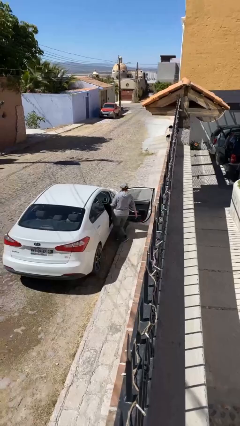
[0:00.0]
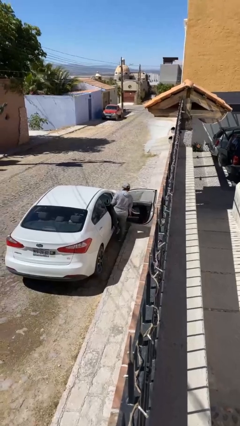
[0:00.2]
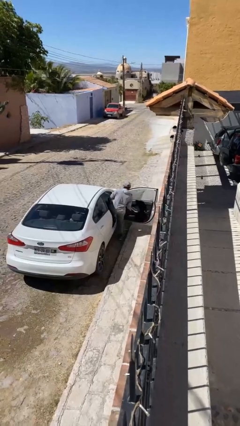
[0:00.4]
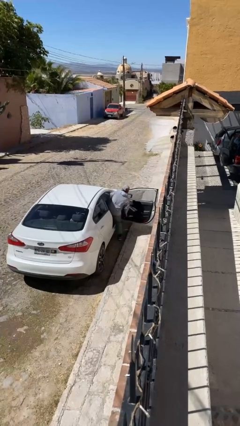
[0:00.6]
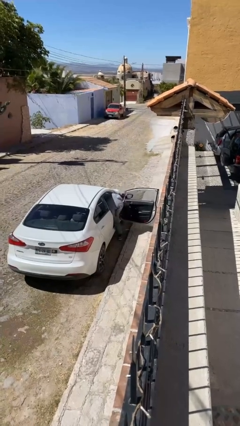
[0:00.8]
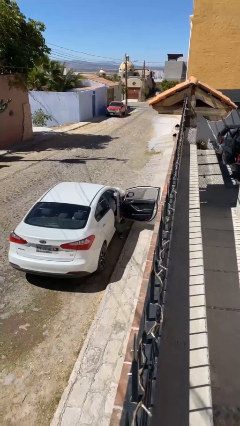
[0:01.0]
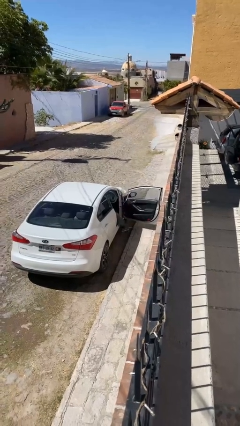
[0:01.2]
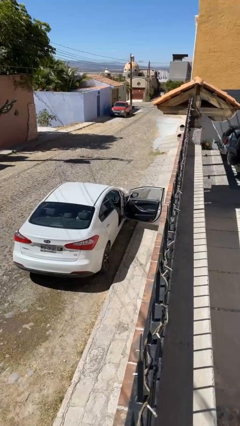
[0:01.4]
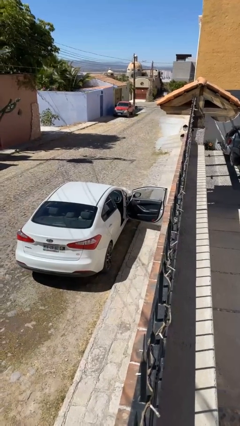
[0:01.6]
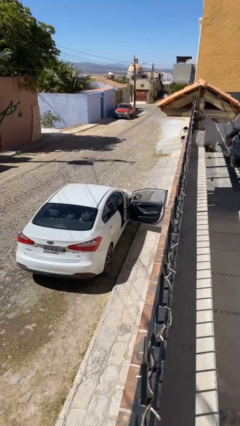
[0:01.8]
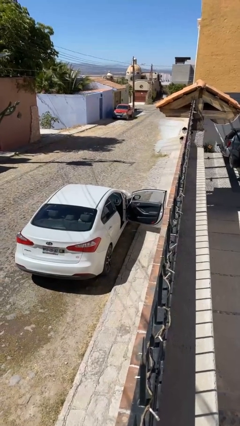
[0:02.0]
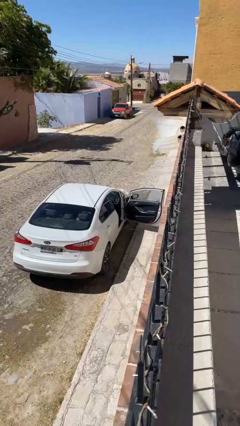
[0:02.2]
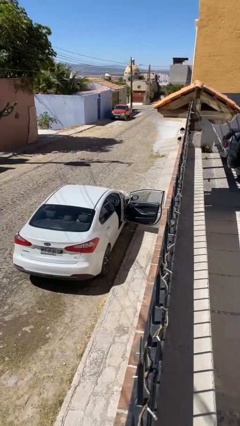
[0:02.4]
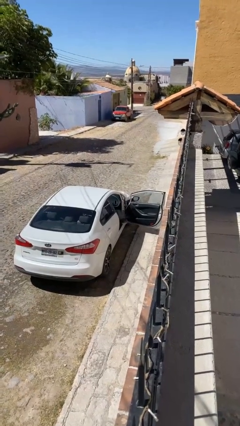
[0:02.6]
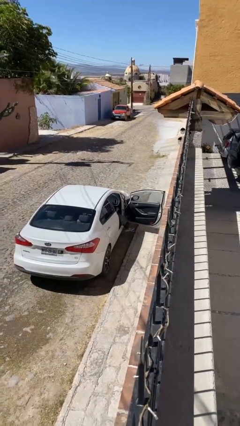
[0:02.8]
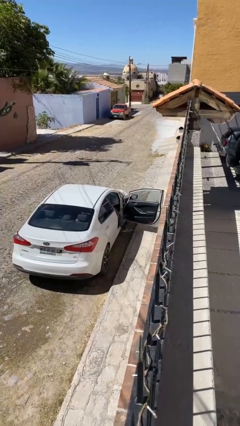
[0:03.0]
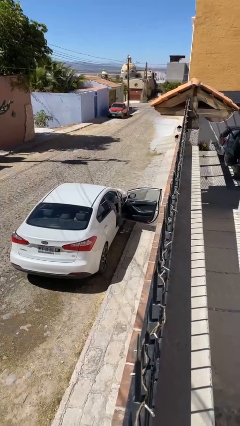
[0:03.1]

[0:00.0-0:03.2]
person enters car

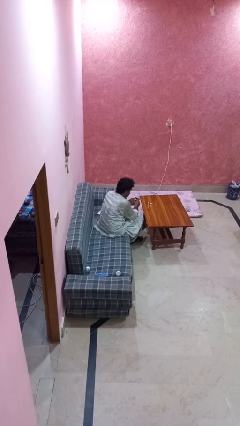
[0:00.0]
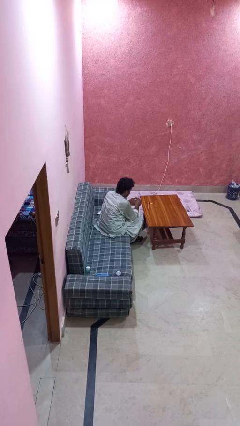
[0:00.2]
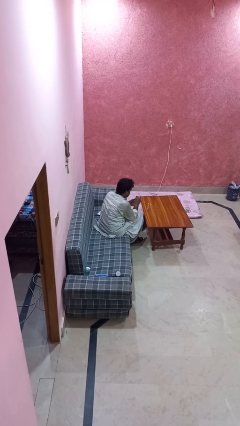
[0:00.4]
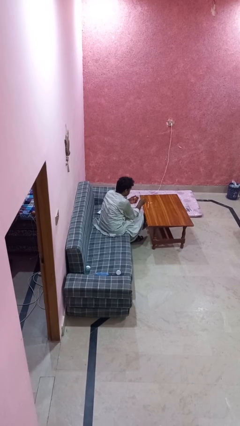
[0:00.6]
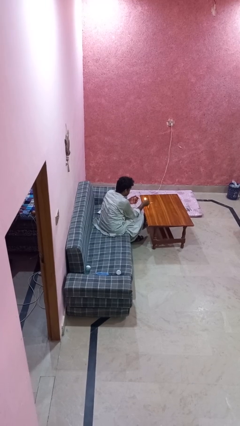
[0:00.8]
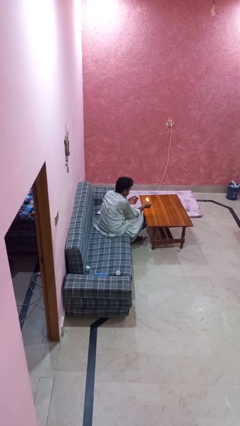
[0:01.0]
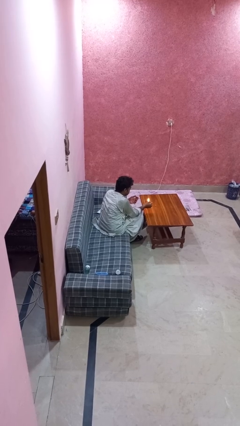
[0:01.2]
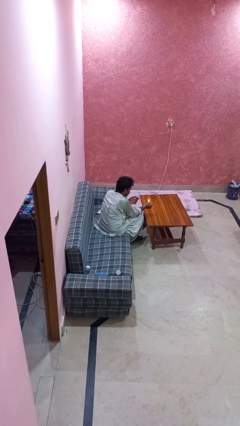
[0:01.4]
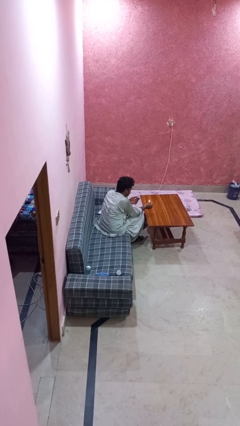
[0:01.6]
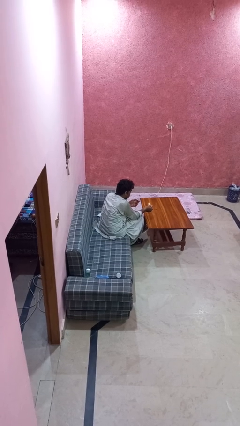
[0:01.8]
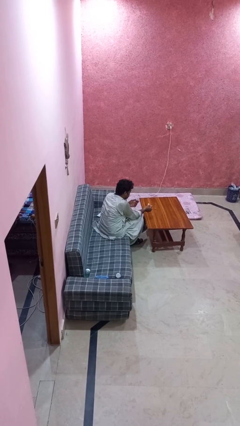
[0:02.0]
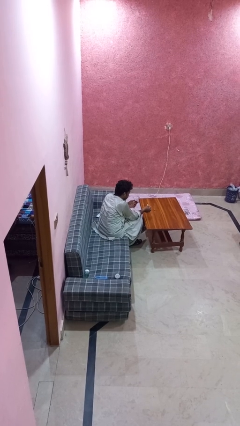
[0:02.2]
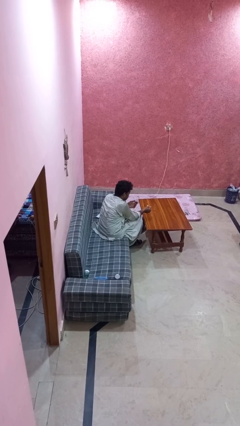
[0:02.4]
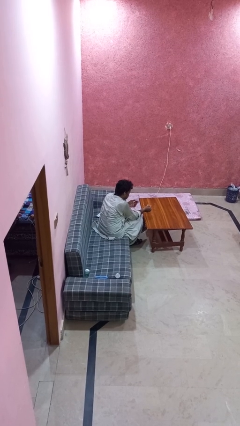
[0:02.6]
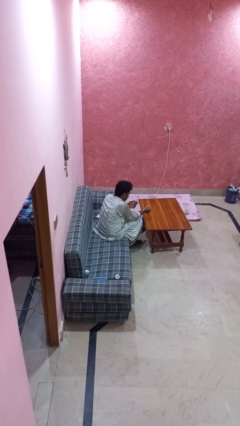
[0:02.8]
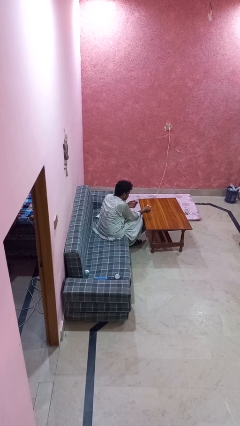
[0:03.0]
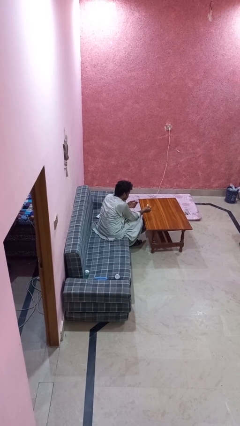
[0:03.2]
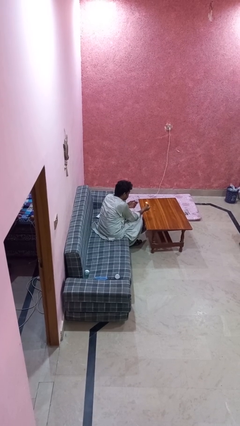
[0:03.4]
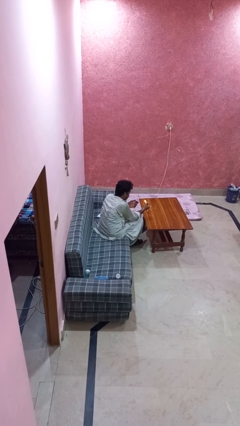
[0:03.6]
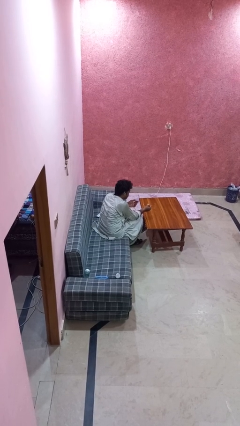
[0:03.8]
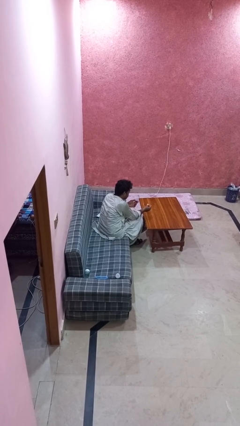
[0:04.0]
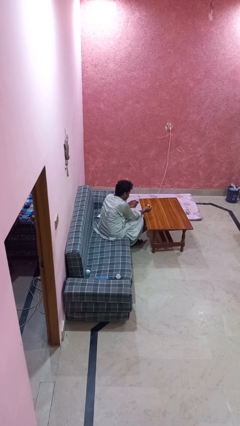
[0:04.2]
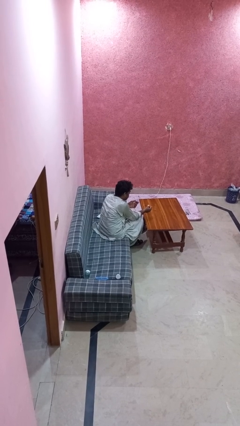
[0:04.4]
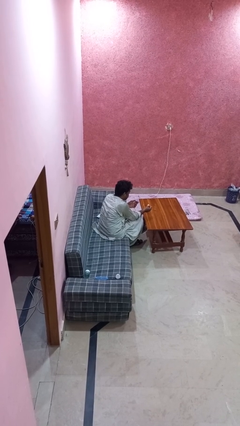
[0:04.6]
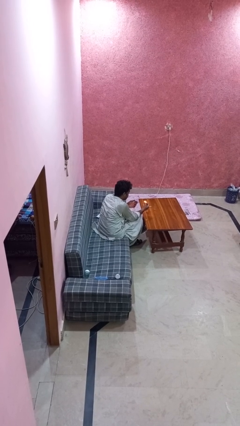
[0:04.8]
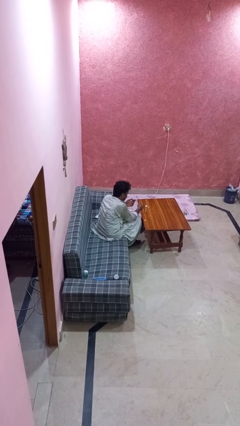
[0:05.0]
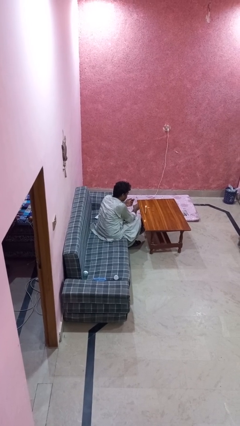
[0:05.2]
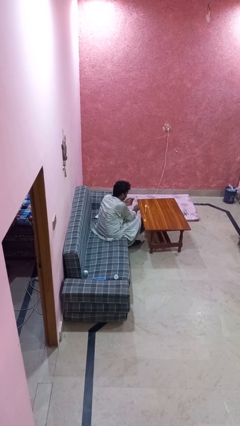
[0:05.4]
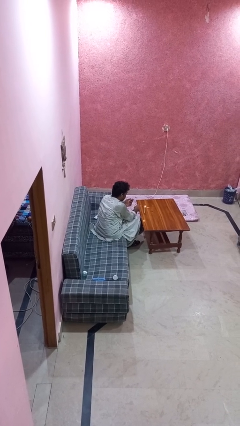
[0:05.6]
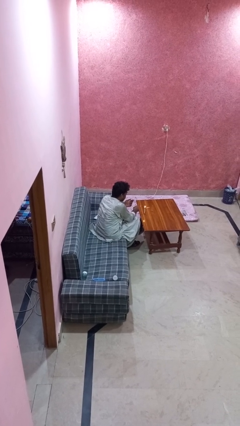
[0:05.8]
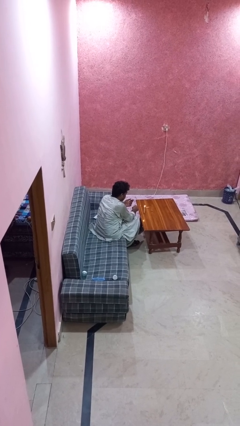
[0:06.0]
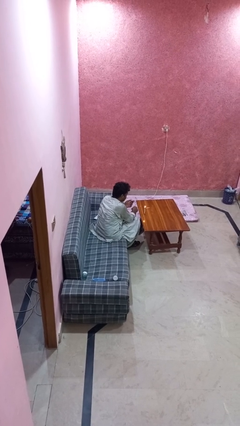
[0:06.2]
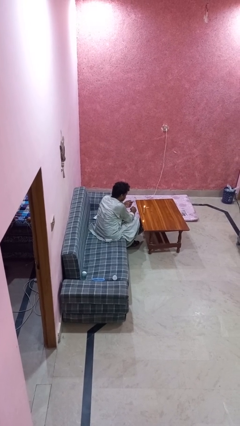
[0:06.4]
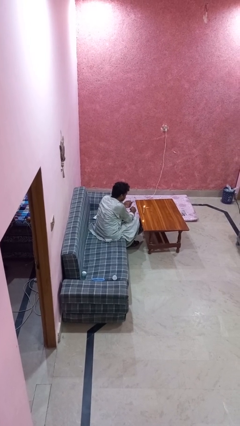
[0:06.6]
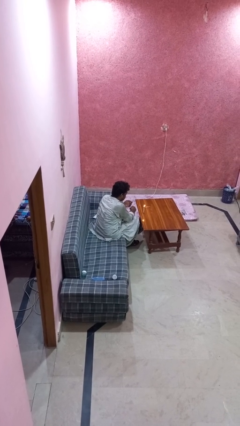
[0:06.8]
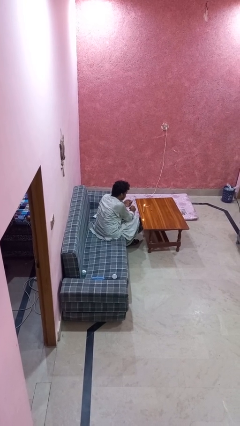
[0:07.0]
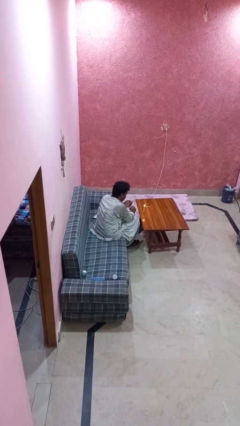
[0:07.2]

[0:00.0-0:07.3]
person lights candle

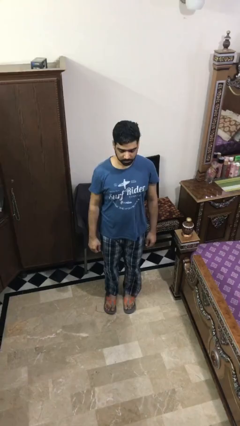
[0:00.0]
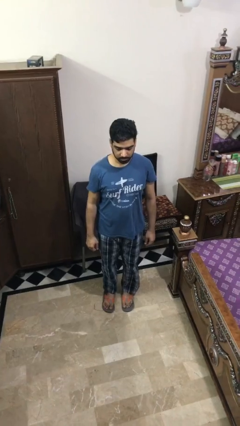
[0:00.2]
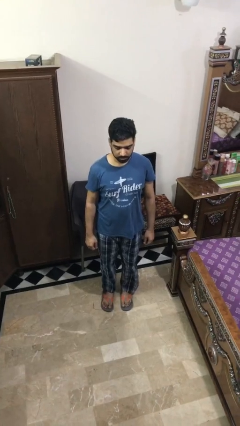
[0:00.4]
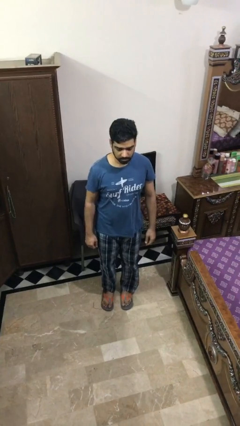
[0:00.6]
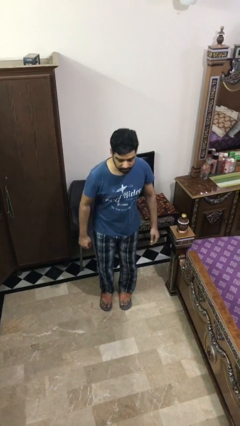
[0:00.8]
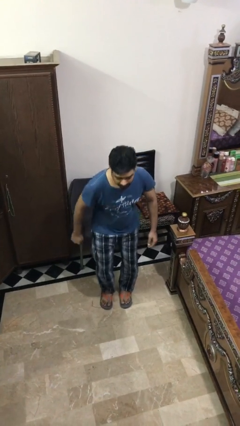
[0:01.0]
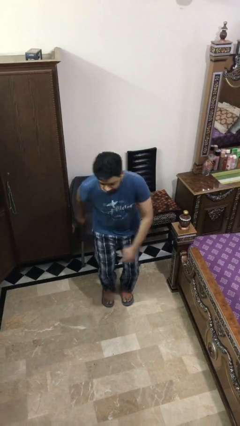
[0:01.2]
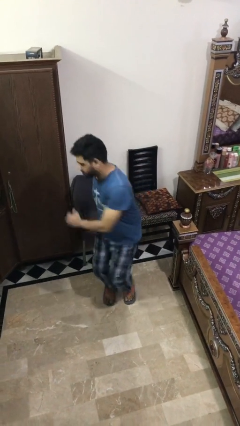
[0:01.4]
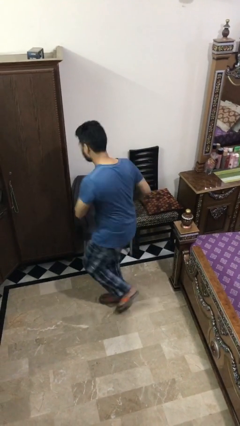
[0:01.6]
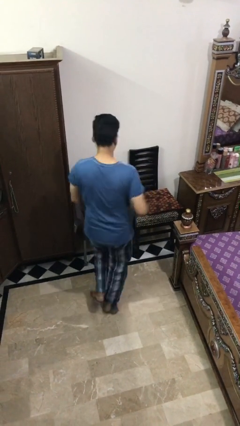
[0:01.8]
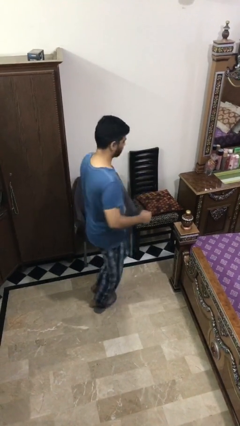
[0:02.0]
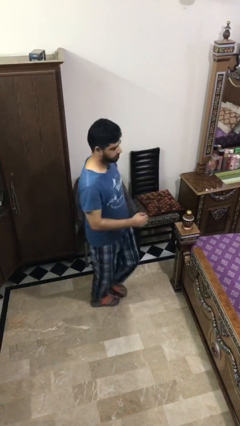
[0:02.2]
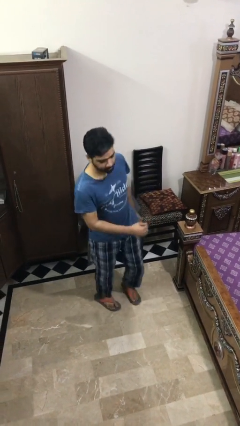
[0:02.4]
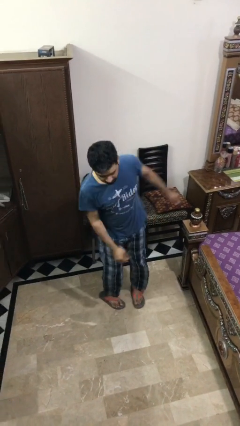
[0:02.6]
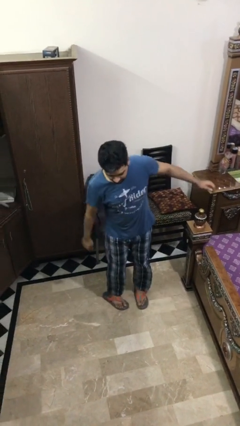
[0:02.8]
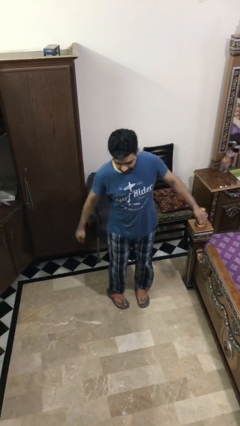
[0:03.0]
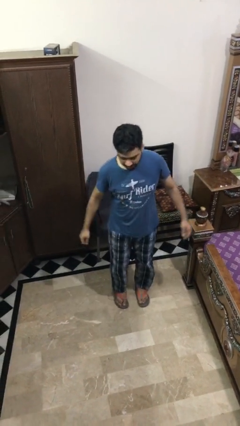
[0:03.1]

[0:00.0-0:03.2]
person twirls

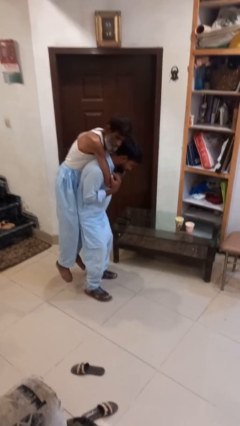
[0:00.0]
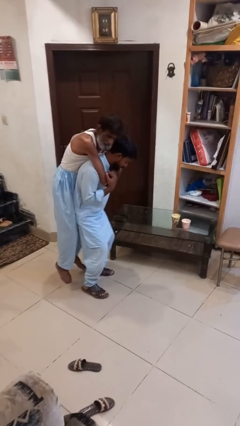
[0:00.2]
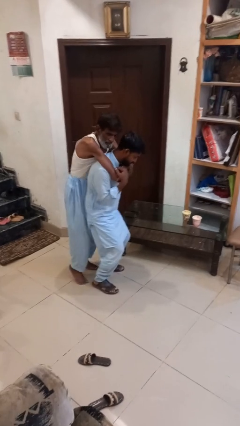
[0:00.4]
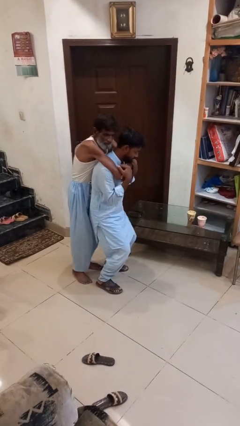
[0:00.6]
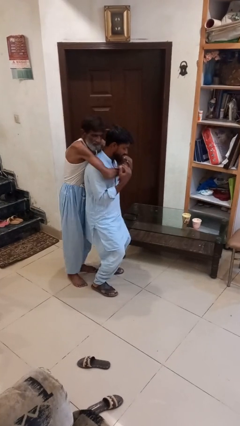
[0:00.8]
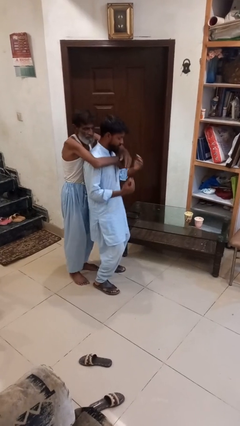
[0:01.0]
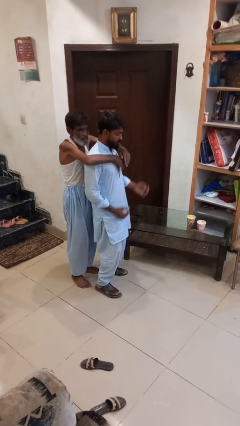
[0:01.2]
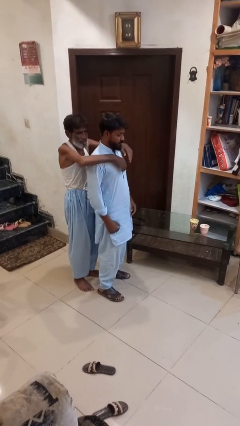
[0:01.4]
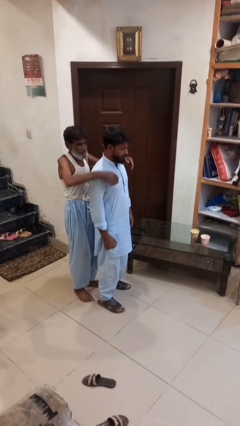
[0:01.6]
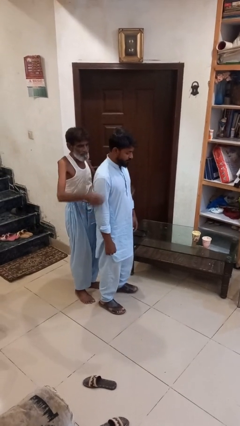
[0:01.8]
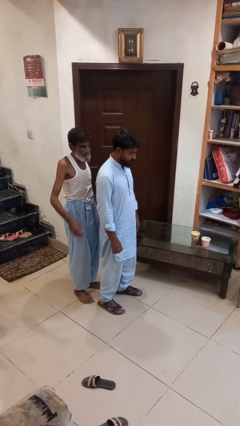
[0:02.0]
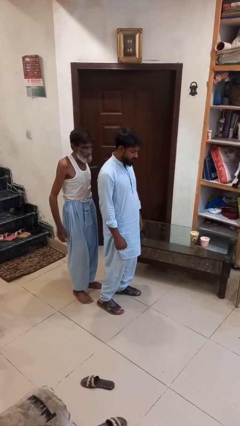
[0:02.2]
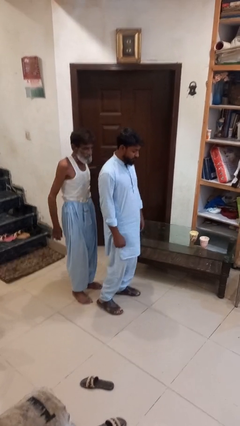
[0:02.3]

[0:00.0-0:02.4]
person puts down person

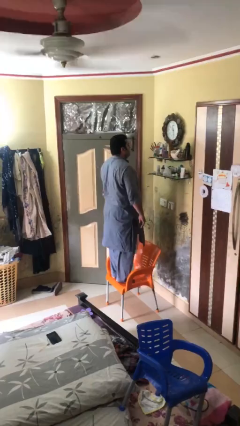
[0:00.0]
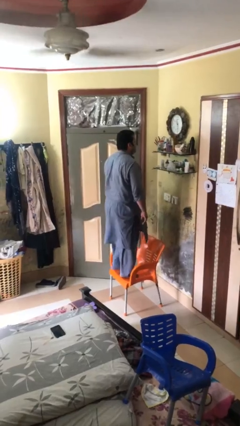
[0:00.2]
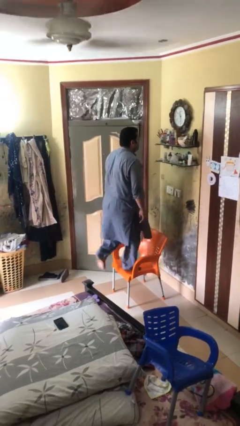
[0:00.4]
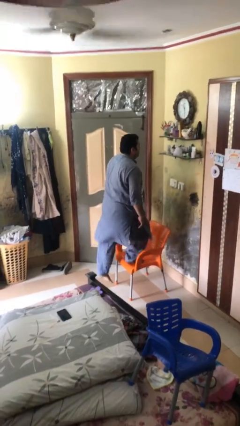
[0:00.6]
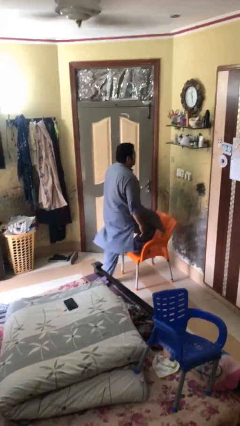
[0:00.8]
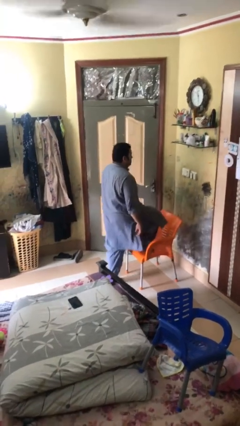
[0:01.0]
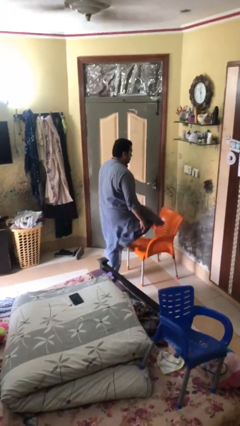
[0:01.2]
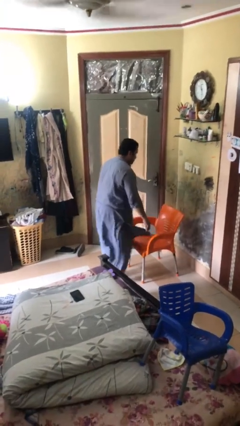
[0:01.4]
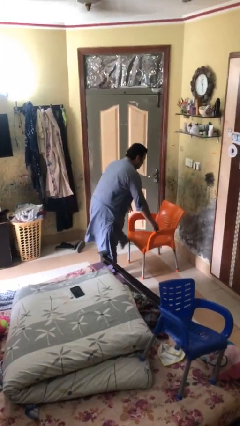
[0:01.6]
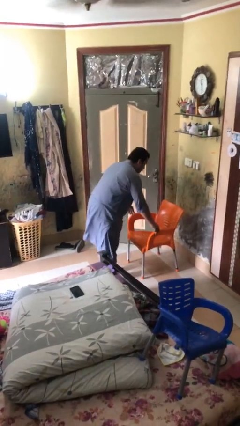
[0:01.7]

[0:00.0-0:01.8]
person climbs off chair

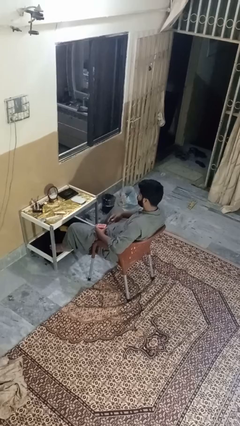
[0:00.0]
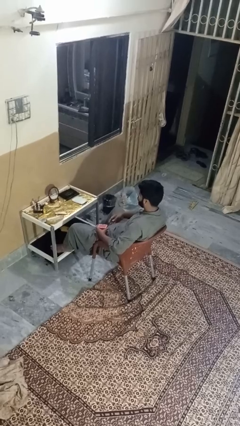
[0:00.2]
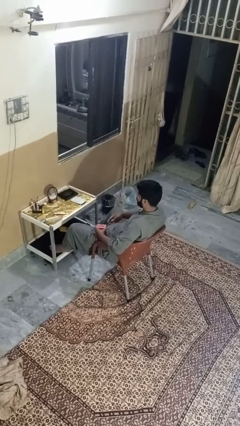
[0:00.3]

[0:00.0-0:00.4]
person picks up object from table
